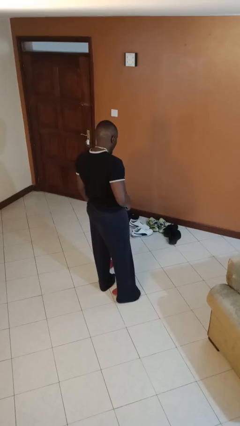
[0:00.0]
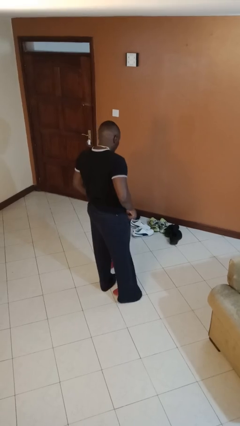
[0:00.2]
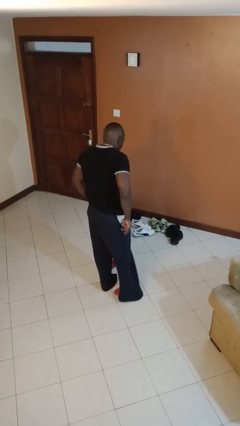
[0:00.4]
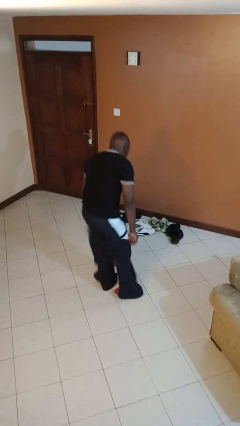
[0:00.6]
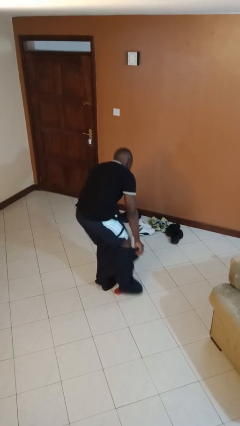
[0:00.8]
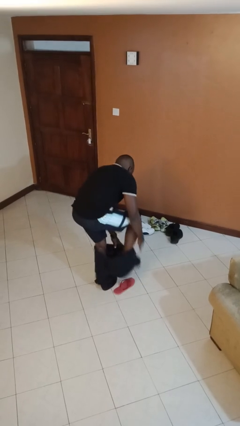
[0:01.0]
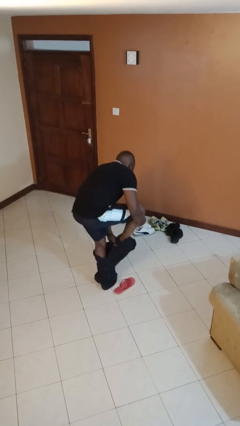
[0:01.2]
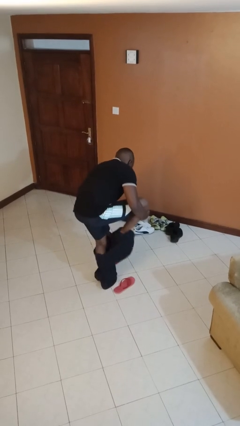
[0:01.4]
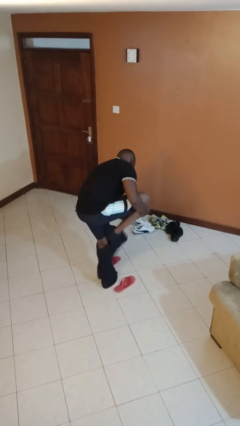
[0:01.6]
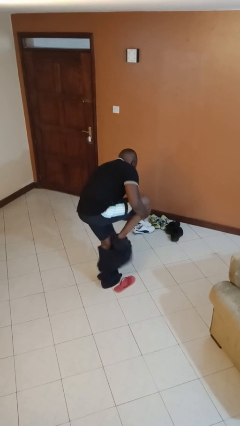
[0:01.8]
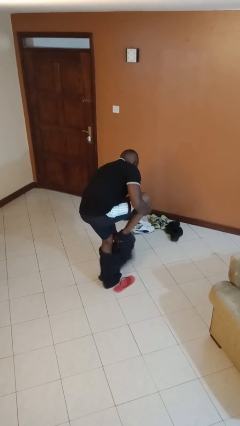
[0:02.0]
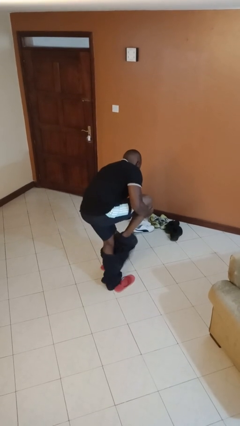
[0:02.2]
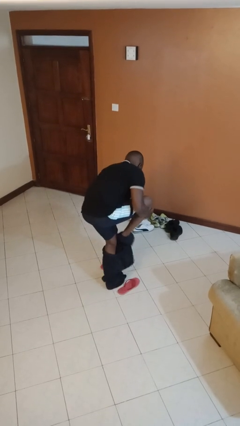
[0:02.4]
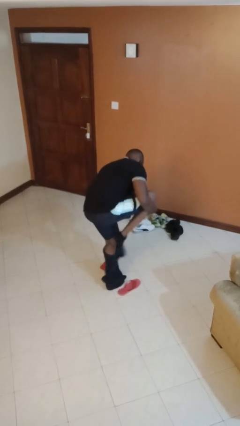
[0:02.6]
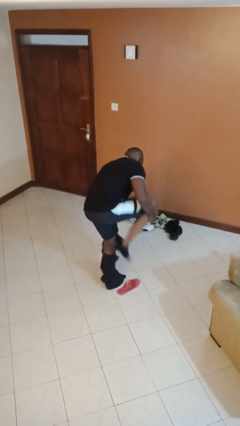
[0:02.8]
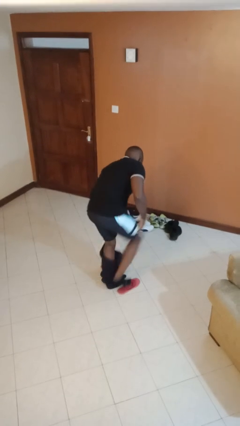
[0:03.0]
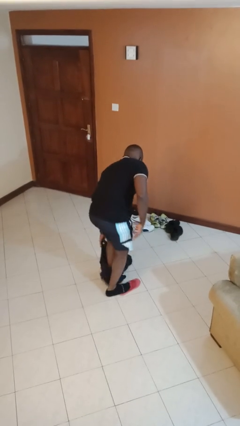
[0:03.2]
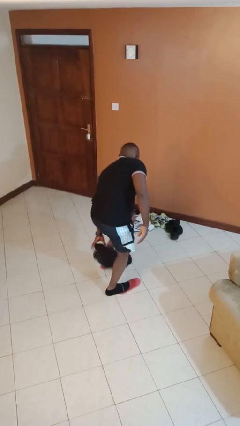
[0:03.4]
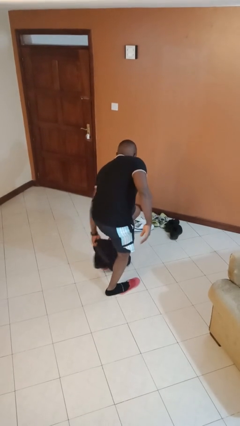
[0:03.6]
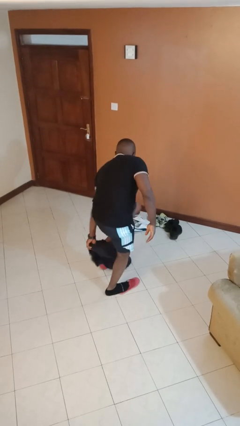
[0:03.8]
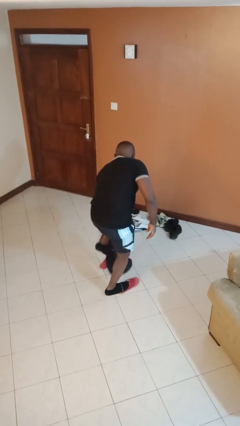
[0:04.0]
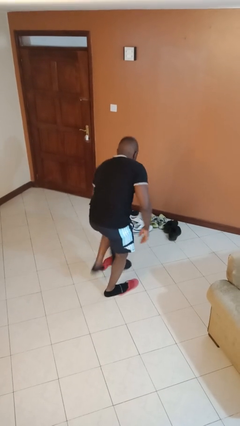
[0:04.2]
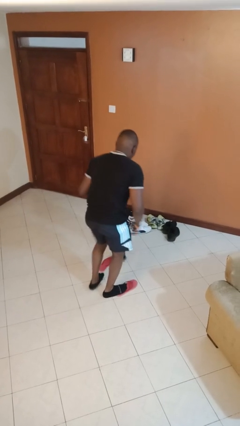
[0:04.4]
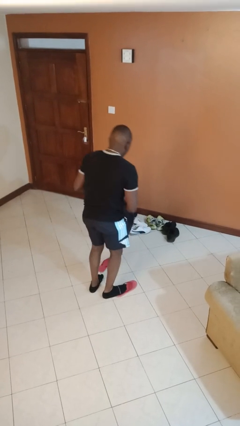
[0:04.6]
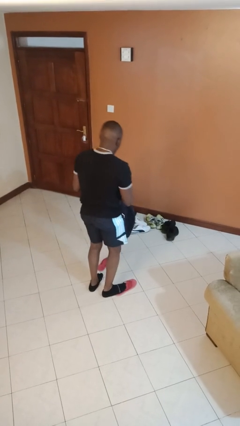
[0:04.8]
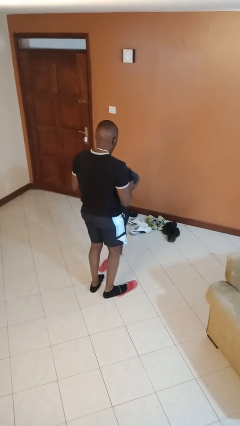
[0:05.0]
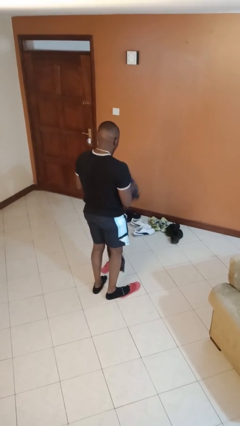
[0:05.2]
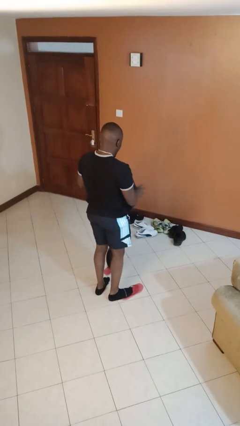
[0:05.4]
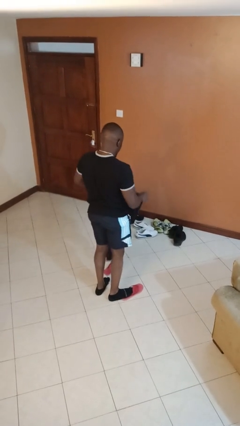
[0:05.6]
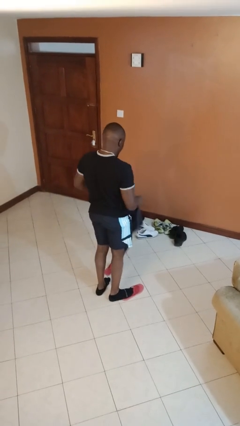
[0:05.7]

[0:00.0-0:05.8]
person takes off pants

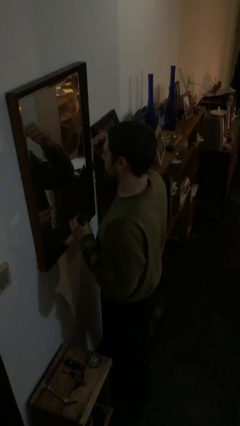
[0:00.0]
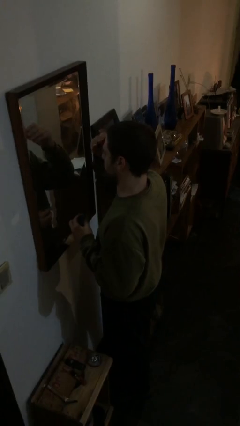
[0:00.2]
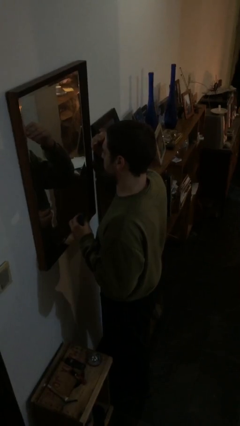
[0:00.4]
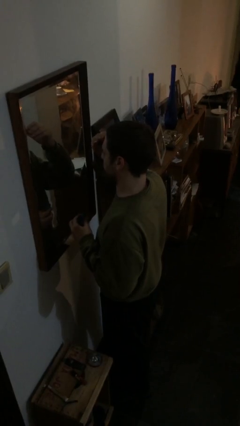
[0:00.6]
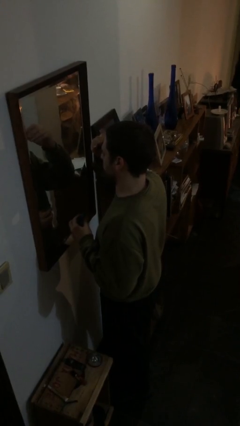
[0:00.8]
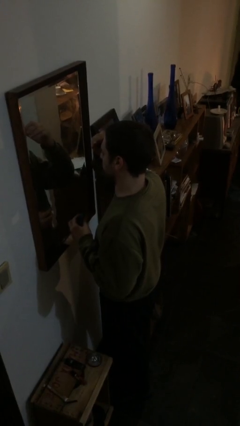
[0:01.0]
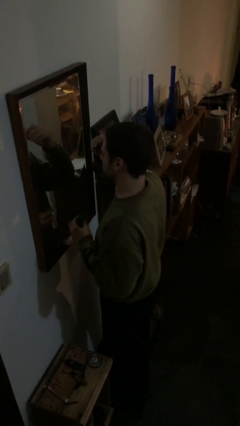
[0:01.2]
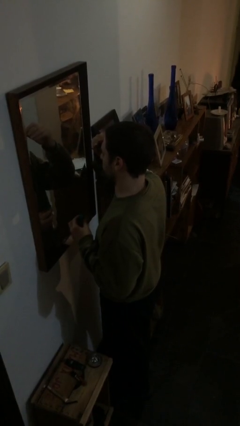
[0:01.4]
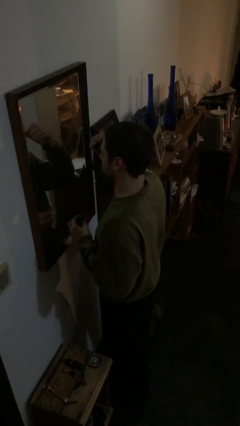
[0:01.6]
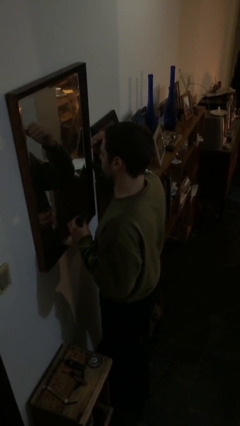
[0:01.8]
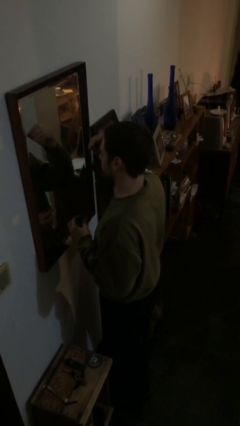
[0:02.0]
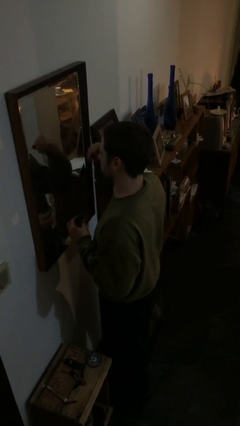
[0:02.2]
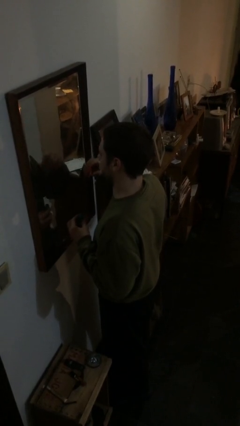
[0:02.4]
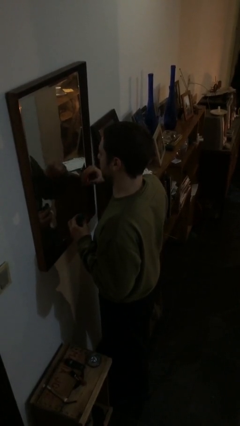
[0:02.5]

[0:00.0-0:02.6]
person applies eye makeup

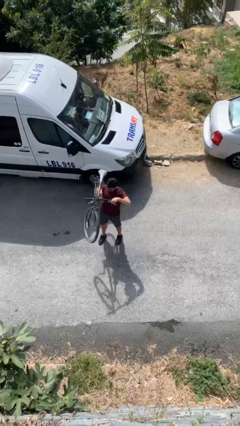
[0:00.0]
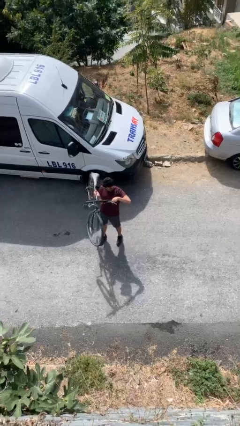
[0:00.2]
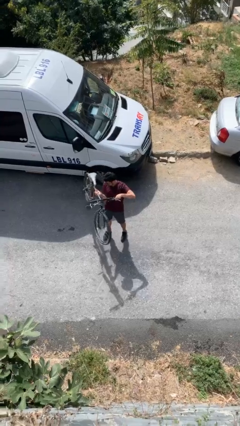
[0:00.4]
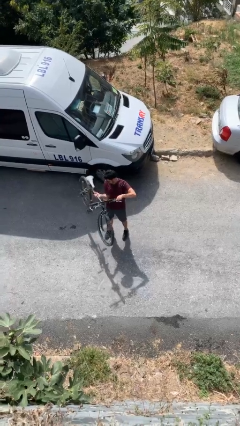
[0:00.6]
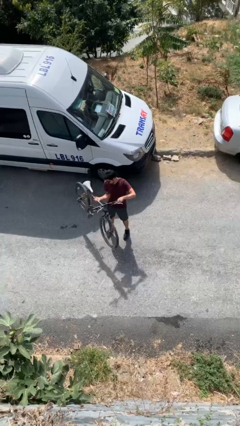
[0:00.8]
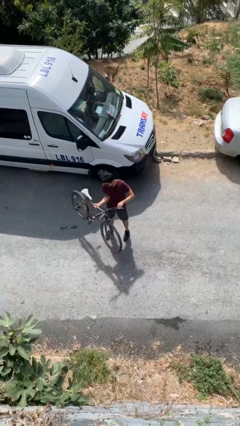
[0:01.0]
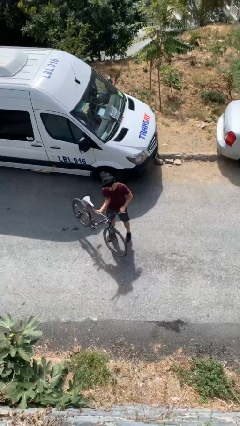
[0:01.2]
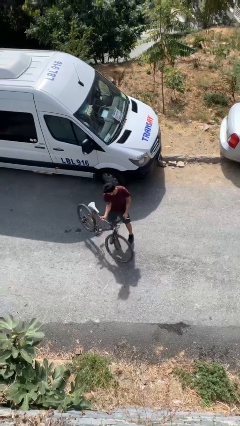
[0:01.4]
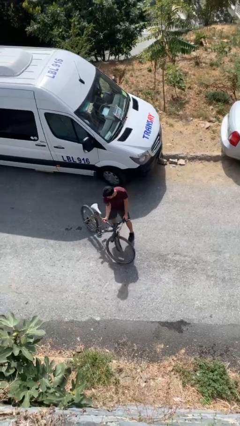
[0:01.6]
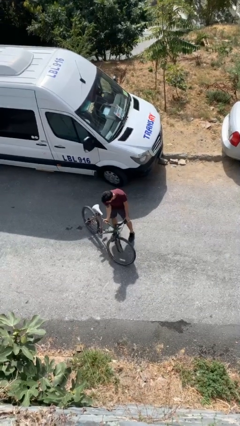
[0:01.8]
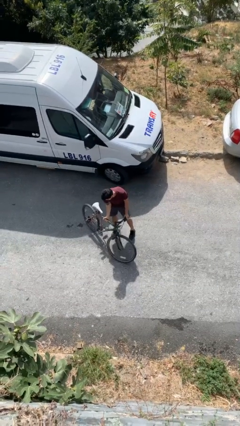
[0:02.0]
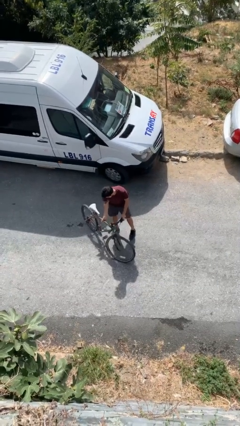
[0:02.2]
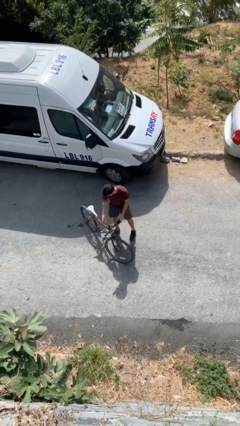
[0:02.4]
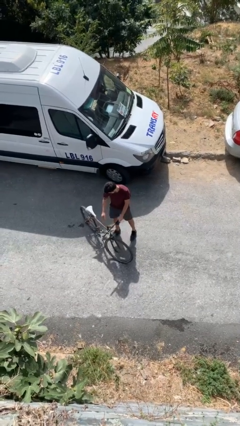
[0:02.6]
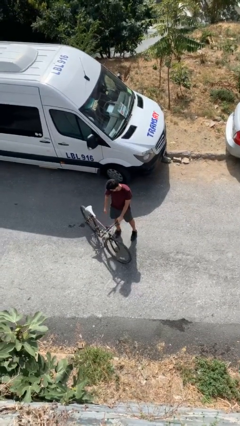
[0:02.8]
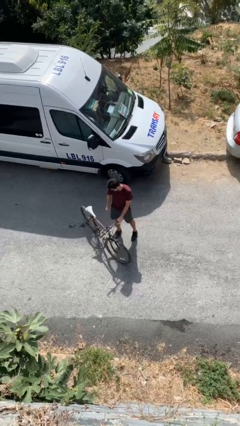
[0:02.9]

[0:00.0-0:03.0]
person puts down object on floor

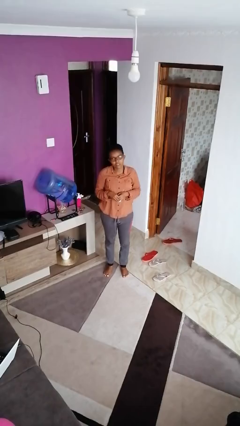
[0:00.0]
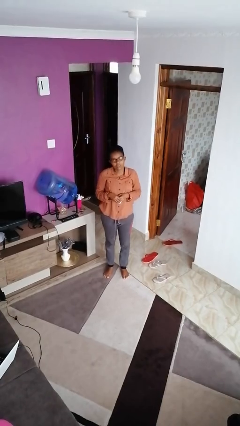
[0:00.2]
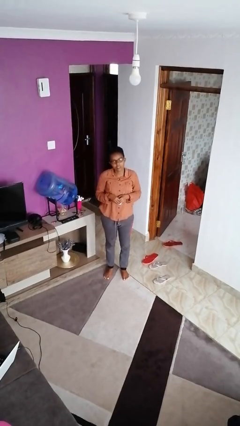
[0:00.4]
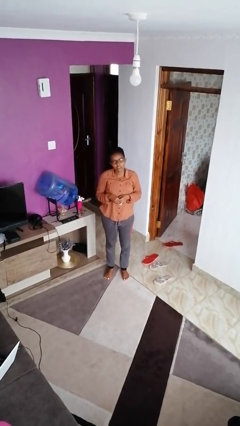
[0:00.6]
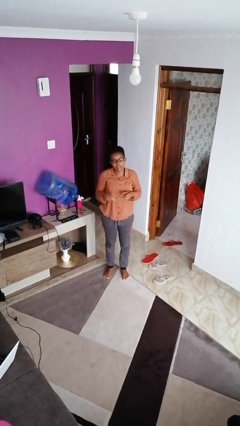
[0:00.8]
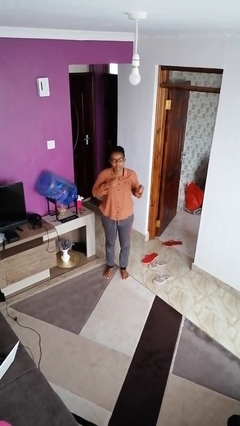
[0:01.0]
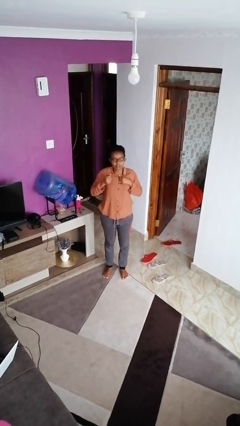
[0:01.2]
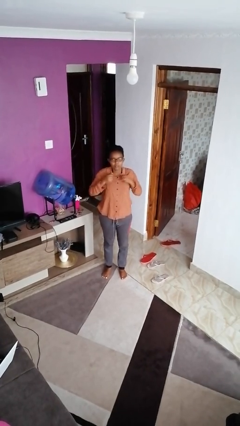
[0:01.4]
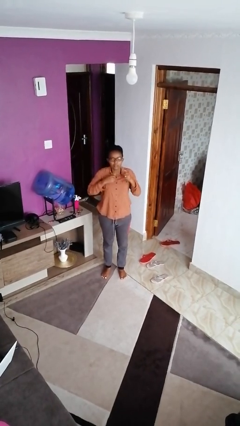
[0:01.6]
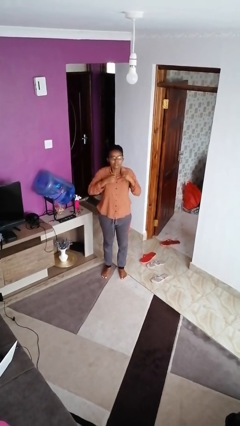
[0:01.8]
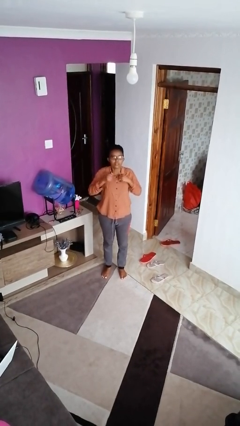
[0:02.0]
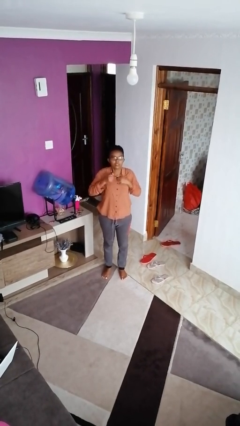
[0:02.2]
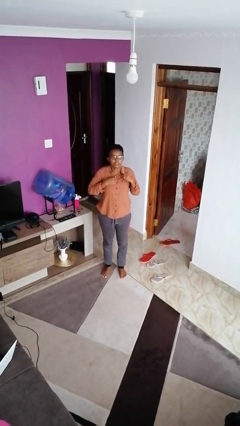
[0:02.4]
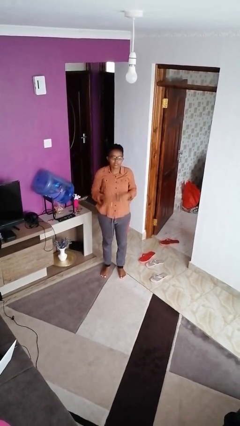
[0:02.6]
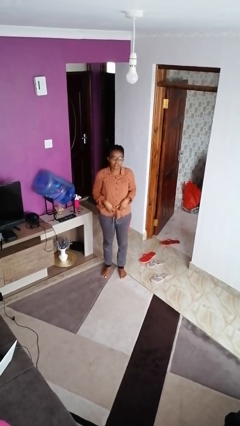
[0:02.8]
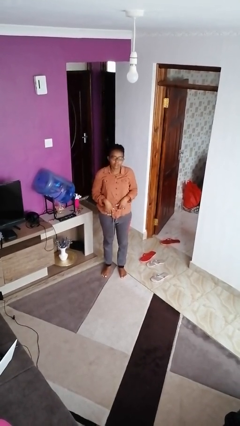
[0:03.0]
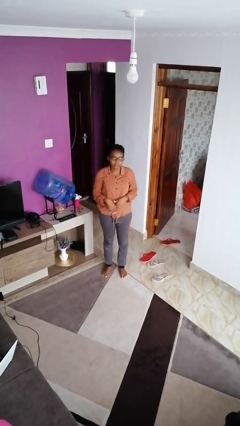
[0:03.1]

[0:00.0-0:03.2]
person drums on chest

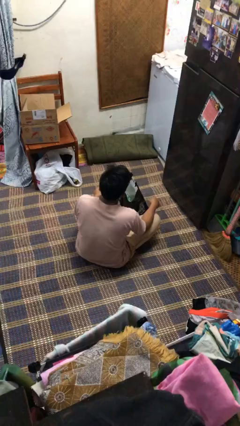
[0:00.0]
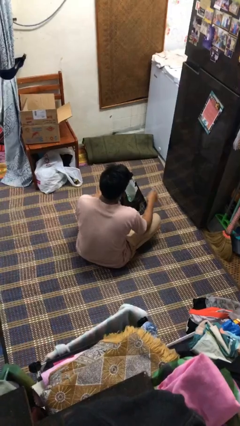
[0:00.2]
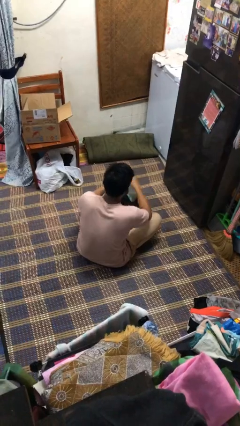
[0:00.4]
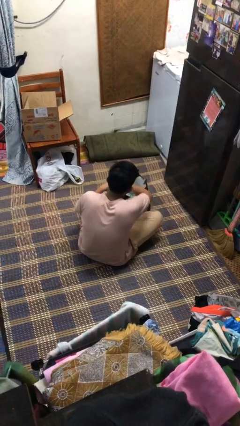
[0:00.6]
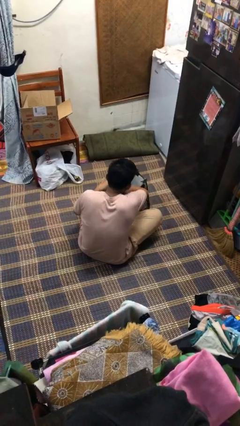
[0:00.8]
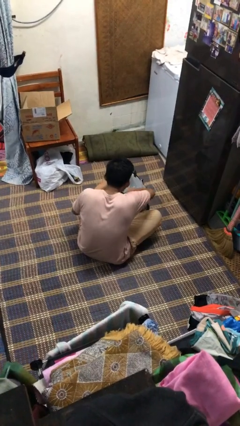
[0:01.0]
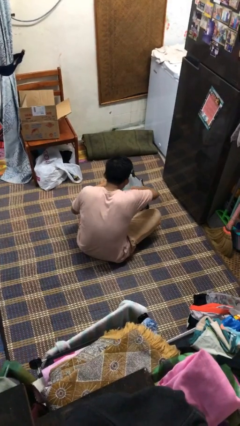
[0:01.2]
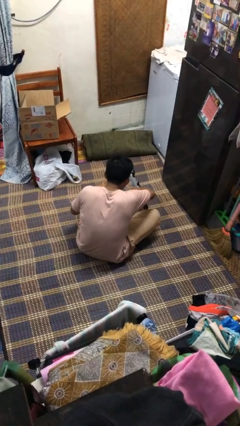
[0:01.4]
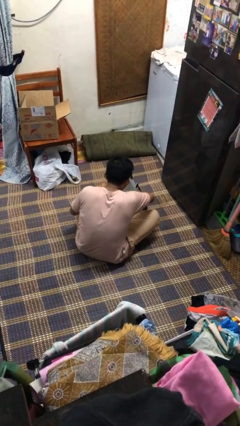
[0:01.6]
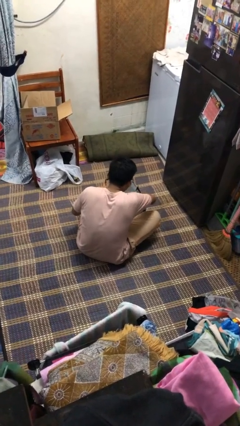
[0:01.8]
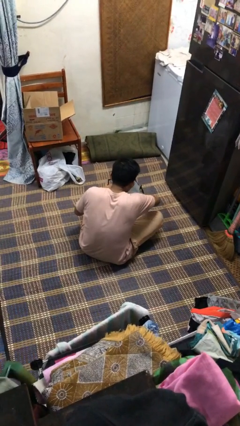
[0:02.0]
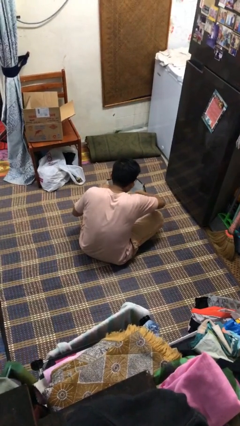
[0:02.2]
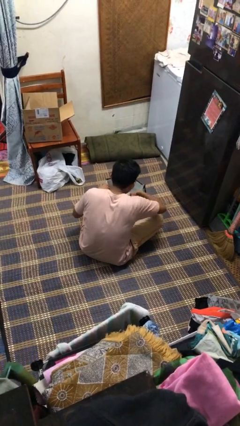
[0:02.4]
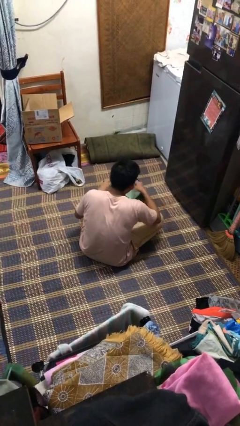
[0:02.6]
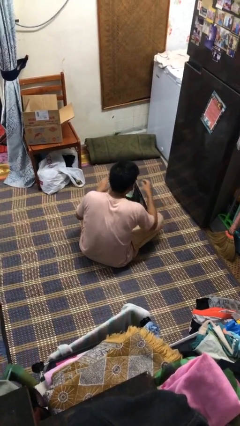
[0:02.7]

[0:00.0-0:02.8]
person searches in bag
